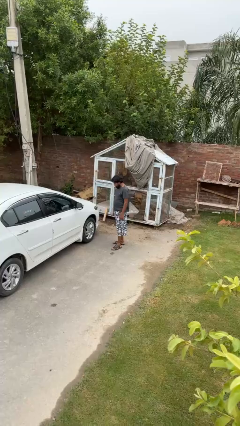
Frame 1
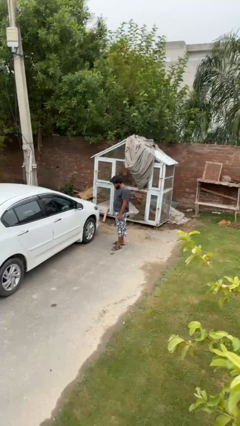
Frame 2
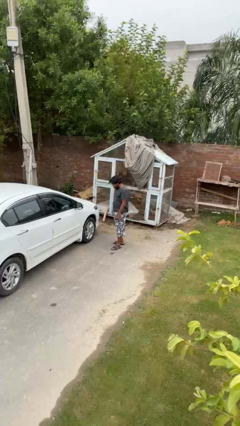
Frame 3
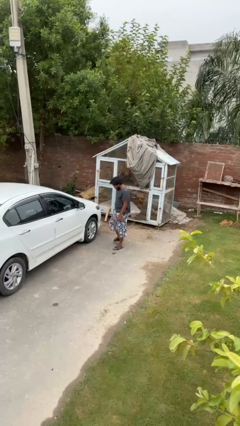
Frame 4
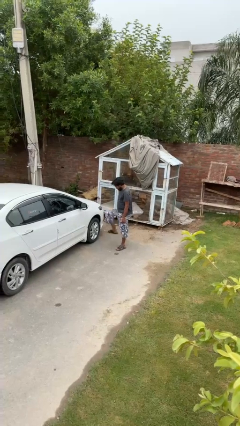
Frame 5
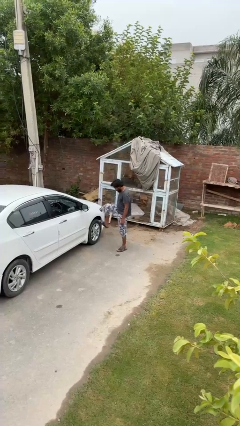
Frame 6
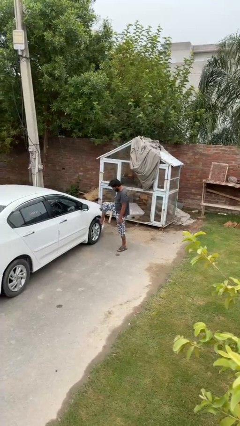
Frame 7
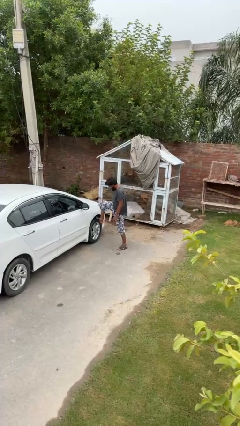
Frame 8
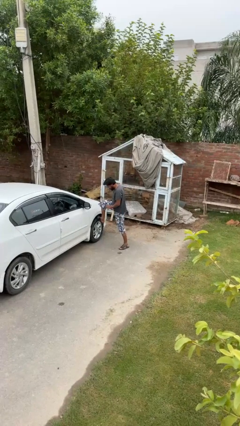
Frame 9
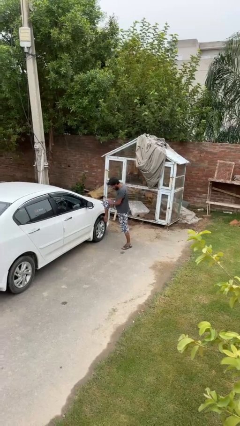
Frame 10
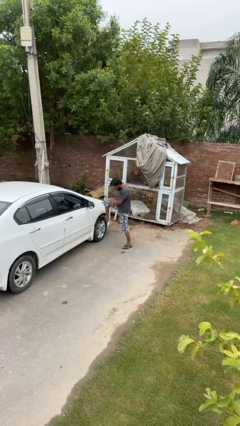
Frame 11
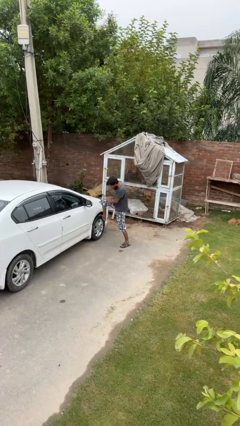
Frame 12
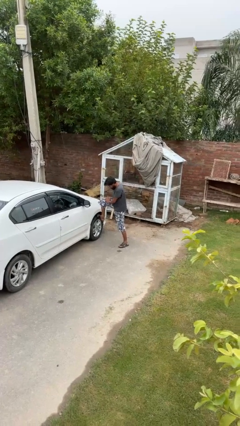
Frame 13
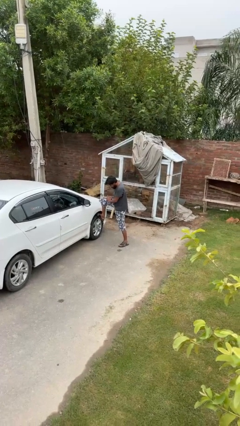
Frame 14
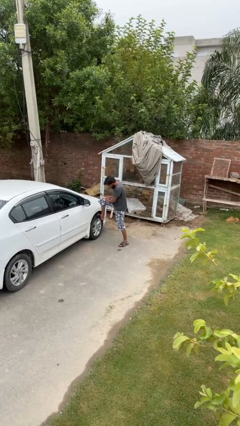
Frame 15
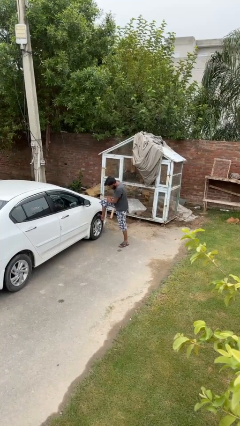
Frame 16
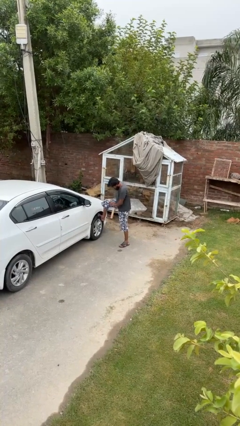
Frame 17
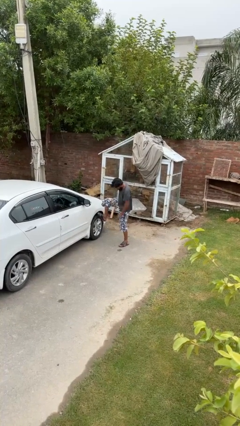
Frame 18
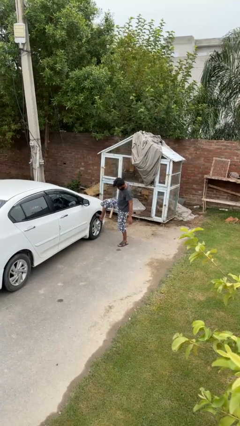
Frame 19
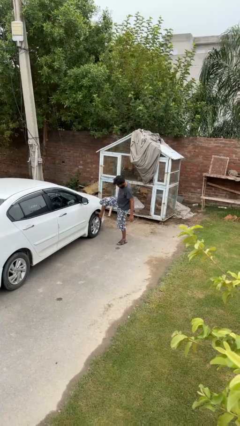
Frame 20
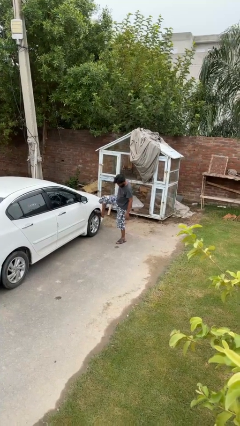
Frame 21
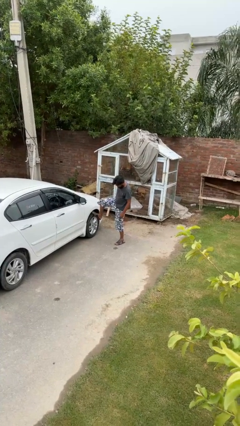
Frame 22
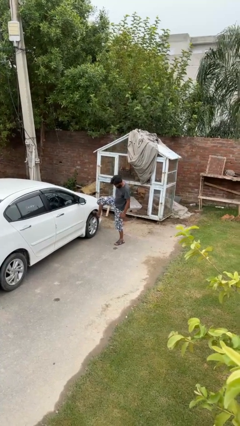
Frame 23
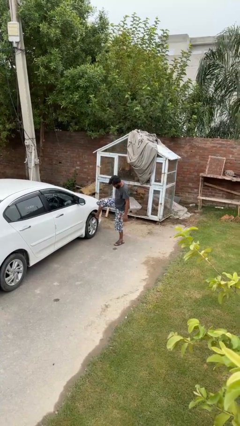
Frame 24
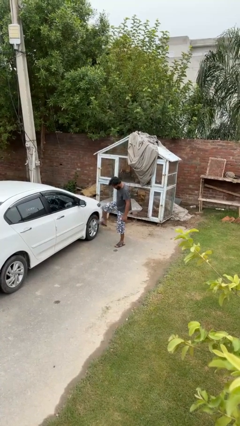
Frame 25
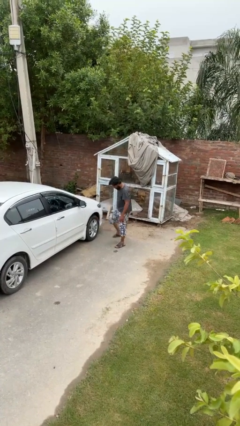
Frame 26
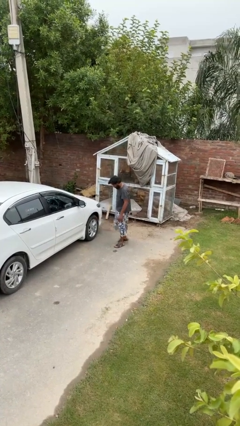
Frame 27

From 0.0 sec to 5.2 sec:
person kicks car tires

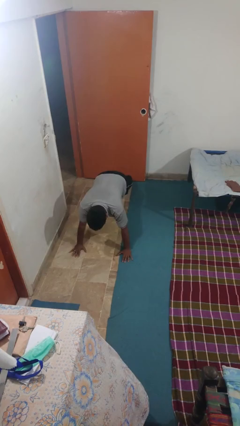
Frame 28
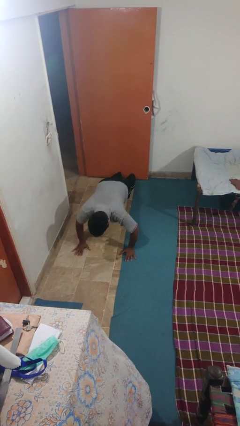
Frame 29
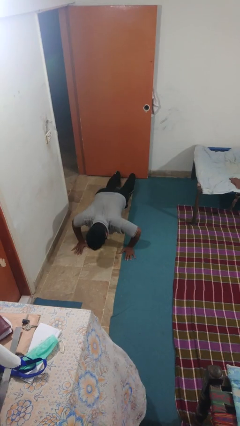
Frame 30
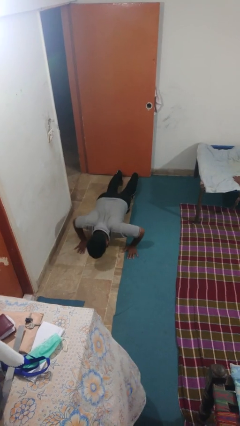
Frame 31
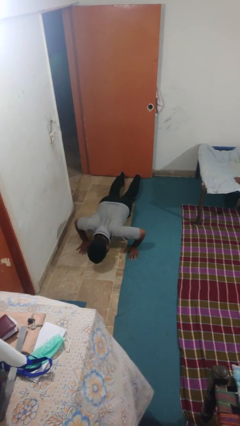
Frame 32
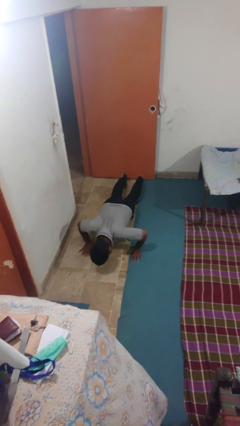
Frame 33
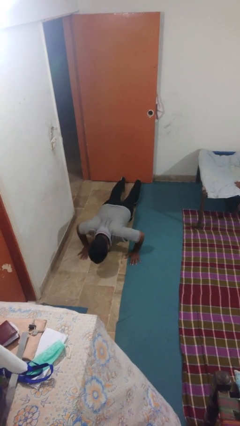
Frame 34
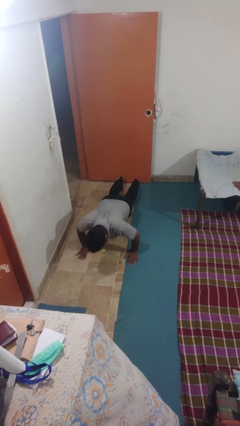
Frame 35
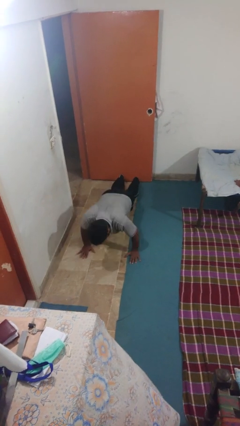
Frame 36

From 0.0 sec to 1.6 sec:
person exercises with pushup

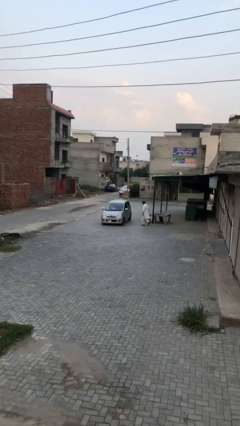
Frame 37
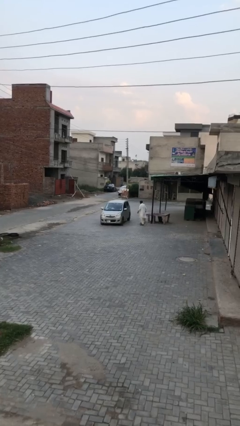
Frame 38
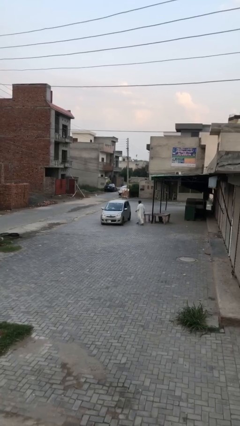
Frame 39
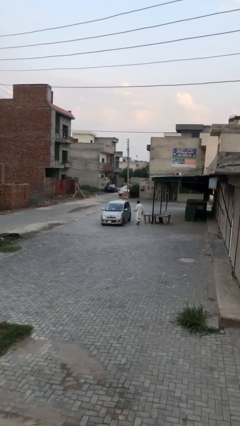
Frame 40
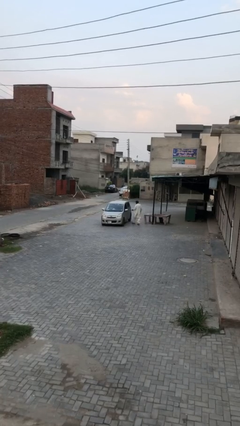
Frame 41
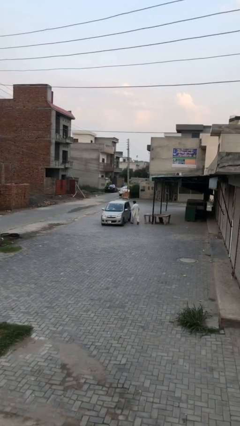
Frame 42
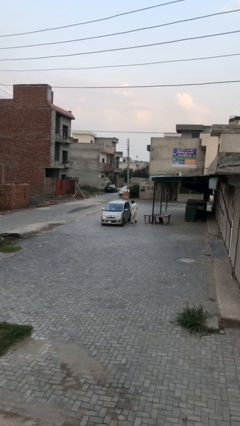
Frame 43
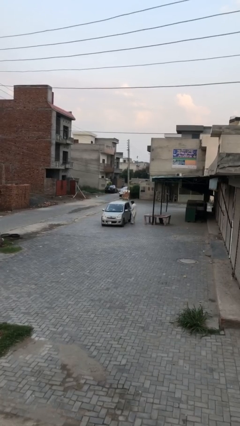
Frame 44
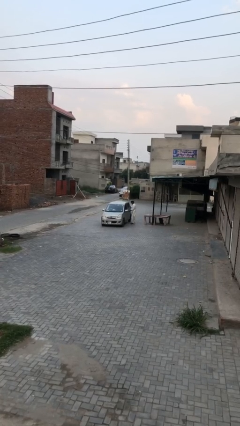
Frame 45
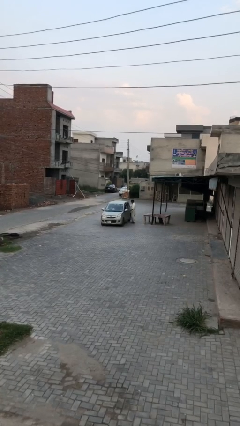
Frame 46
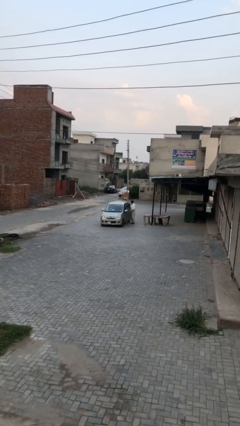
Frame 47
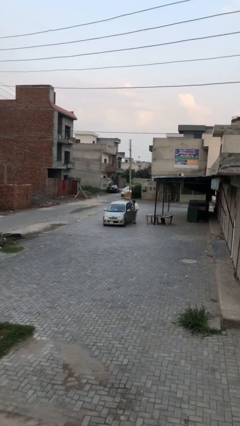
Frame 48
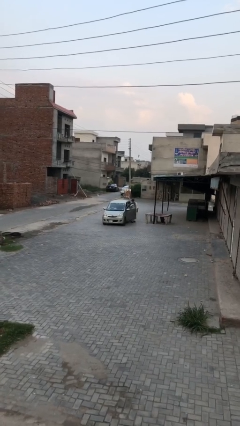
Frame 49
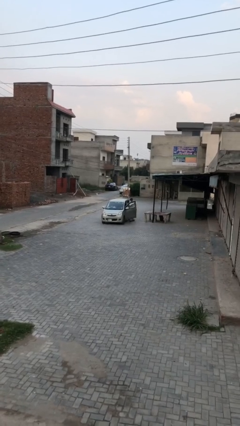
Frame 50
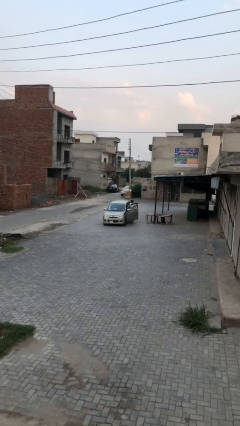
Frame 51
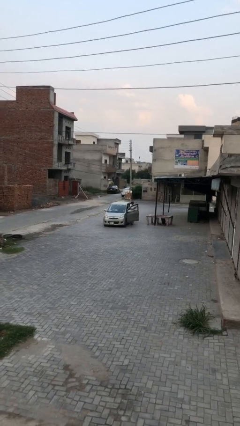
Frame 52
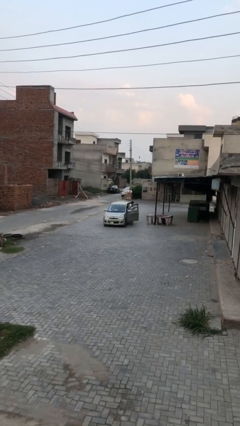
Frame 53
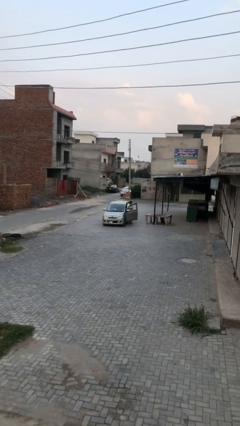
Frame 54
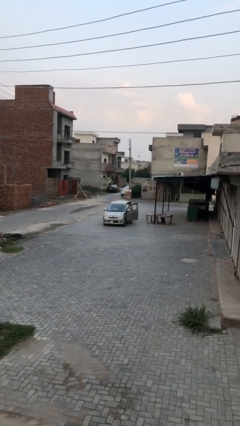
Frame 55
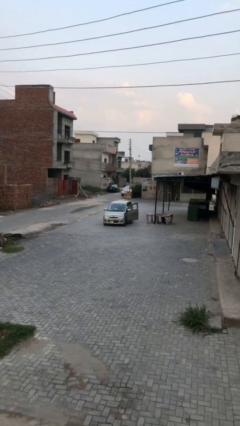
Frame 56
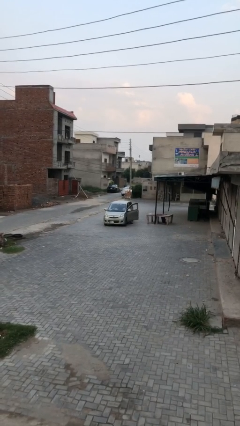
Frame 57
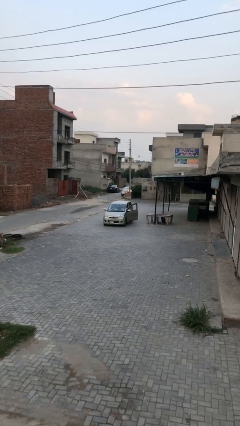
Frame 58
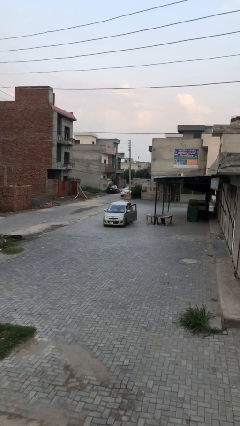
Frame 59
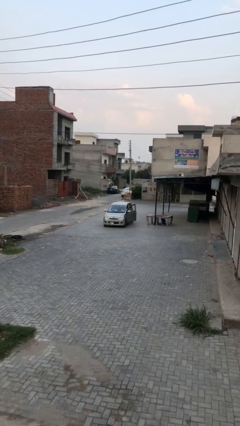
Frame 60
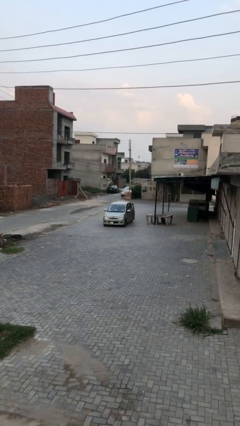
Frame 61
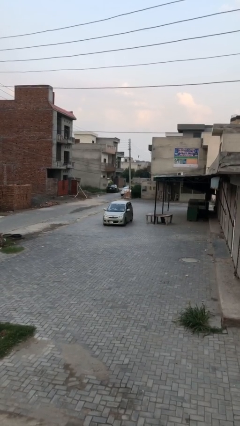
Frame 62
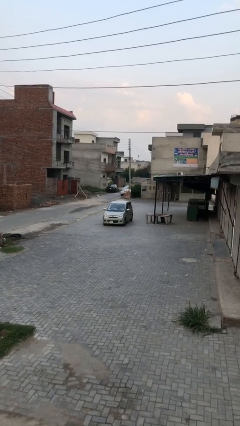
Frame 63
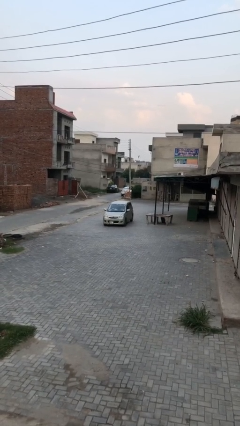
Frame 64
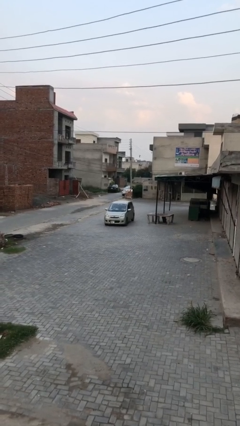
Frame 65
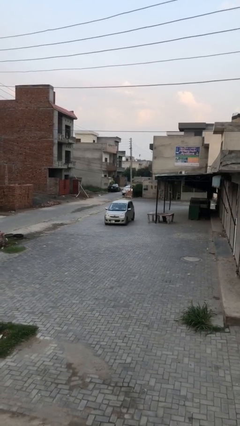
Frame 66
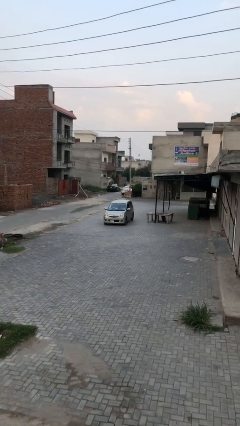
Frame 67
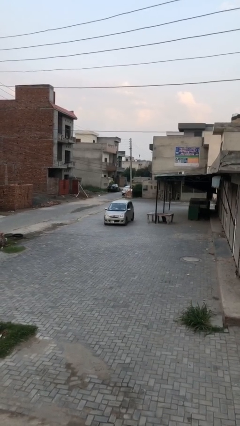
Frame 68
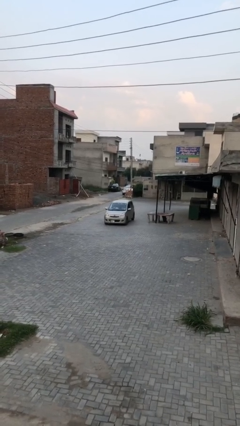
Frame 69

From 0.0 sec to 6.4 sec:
car picks up person

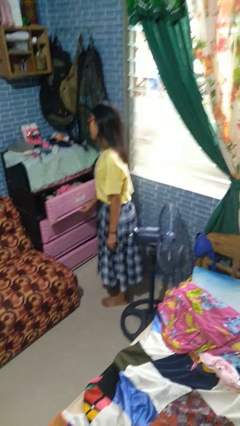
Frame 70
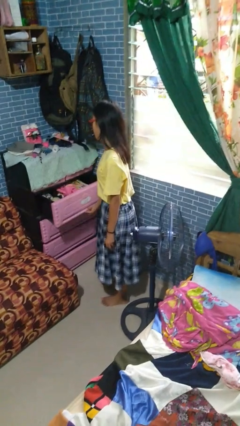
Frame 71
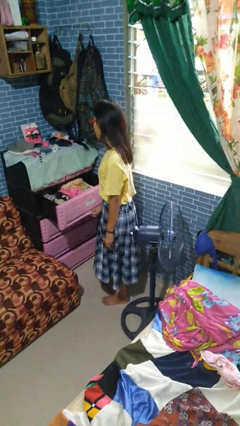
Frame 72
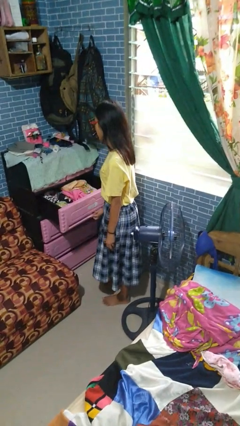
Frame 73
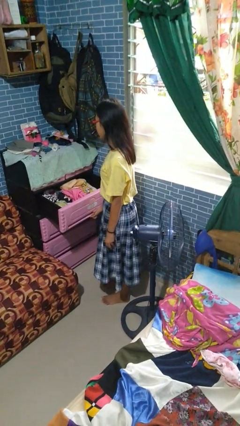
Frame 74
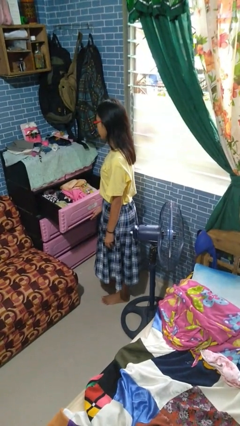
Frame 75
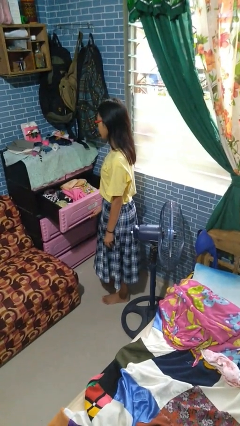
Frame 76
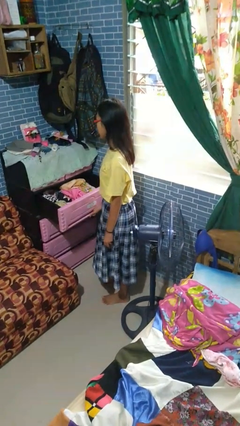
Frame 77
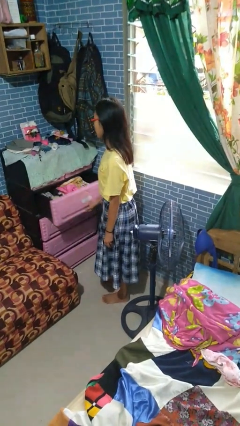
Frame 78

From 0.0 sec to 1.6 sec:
person opens dresser drawer

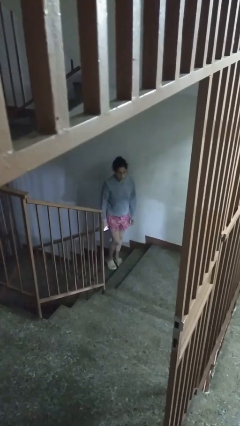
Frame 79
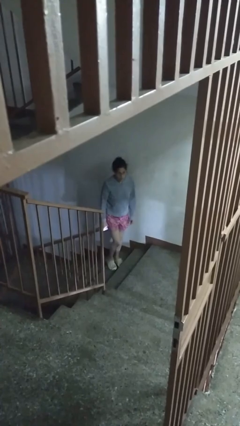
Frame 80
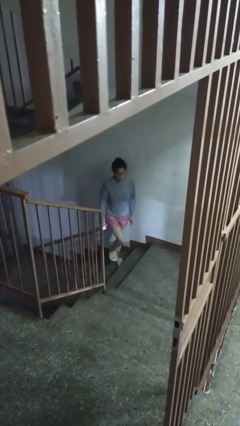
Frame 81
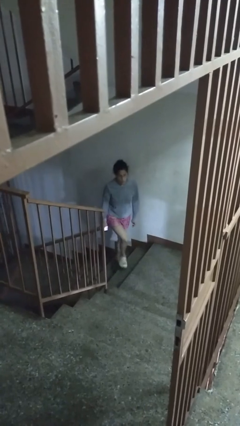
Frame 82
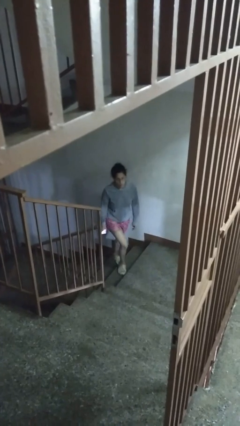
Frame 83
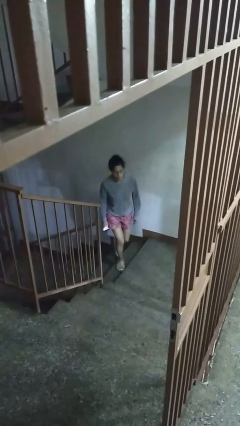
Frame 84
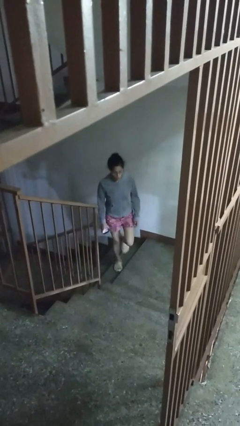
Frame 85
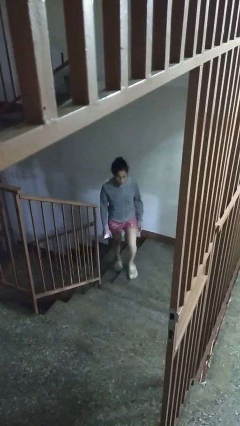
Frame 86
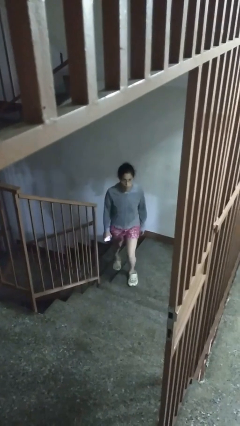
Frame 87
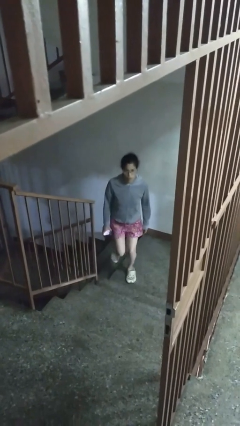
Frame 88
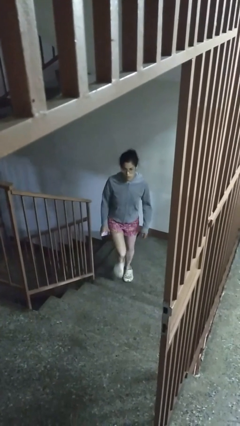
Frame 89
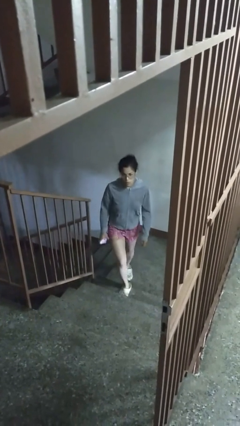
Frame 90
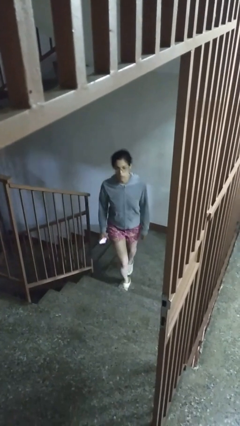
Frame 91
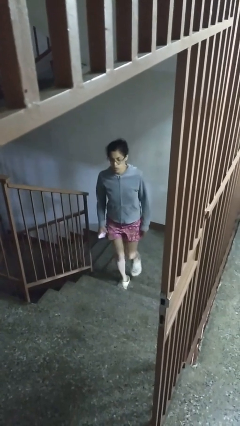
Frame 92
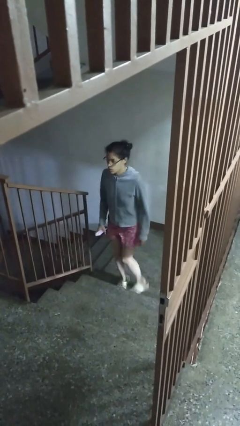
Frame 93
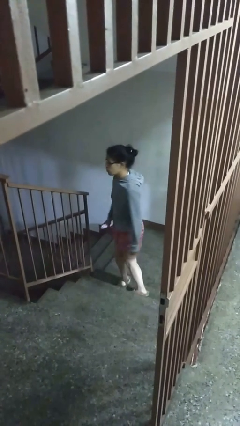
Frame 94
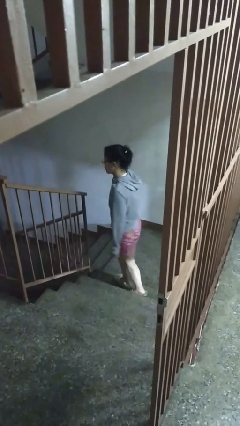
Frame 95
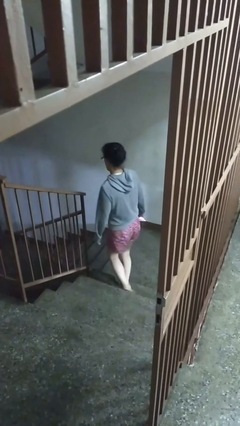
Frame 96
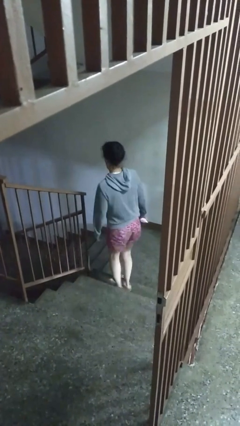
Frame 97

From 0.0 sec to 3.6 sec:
person climbs up stairs
